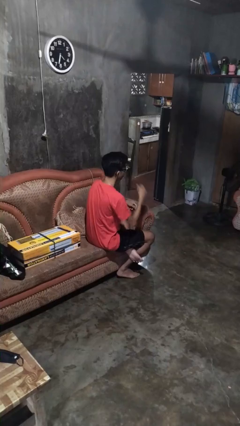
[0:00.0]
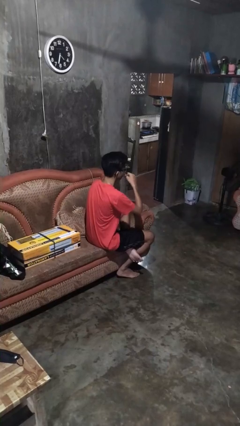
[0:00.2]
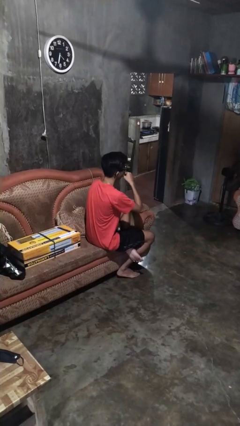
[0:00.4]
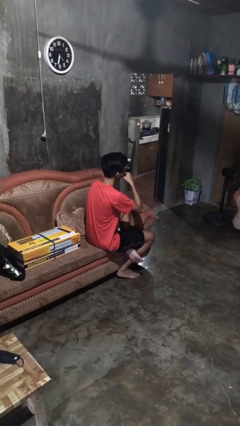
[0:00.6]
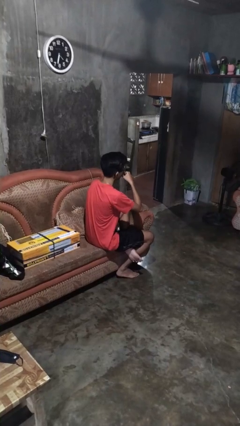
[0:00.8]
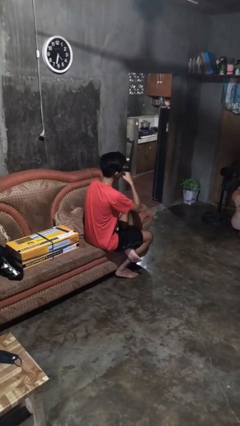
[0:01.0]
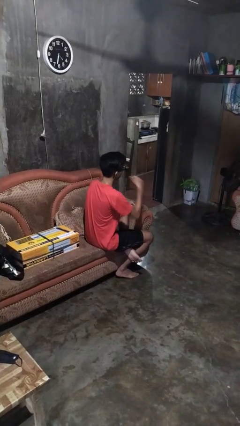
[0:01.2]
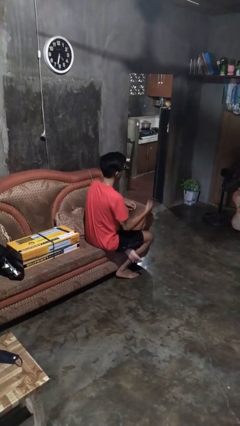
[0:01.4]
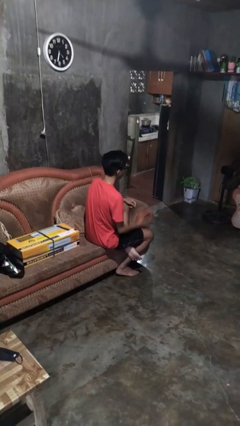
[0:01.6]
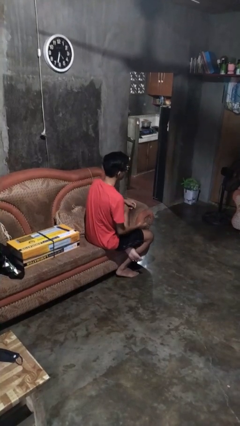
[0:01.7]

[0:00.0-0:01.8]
person licks fingers

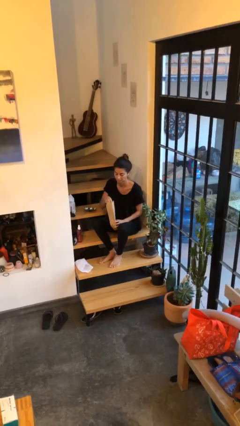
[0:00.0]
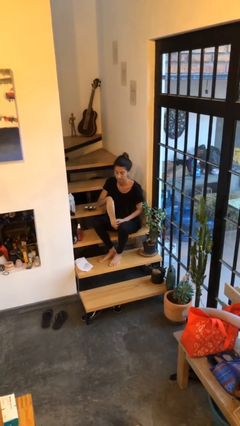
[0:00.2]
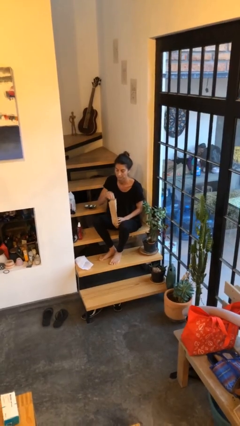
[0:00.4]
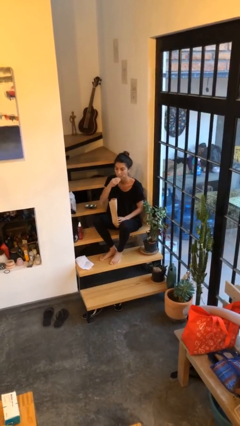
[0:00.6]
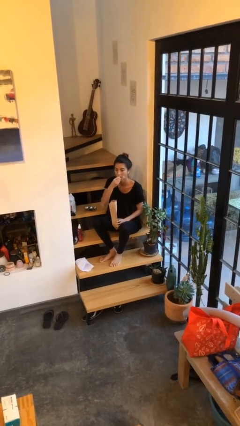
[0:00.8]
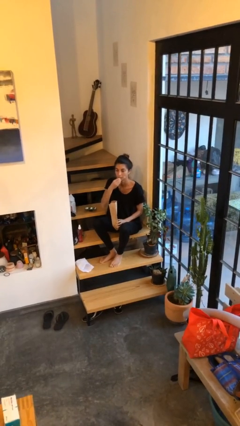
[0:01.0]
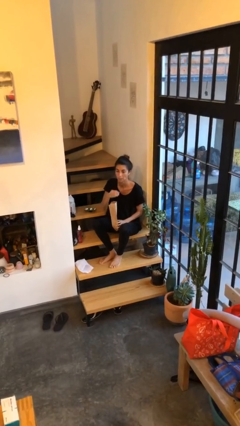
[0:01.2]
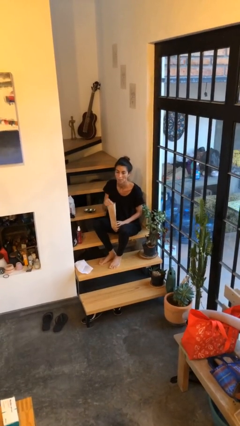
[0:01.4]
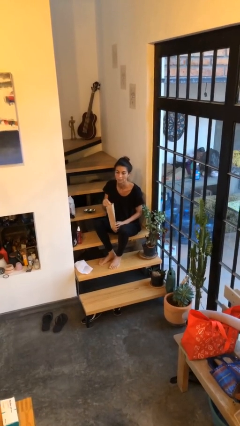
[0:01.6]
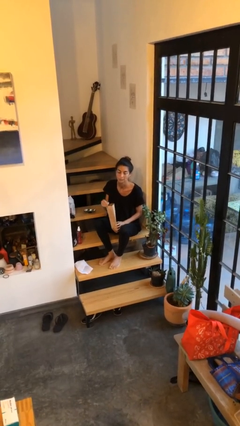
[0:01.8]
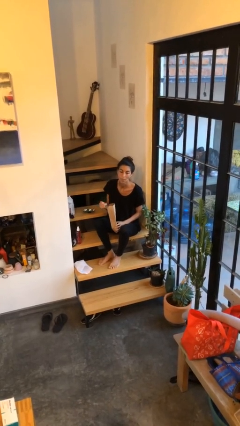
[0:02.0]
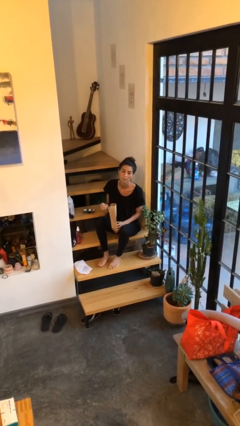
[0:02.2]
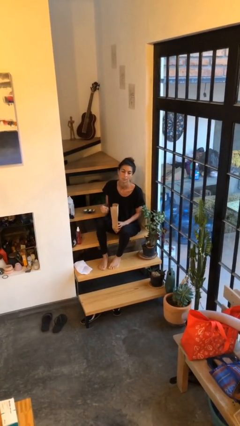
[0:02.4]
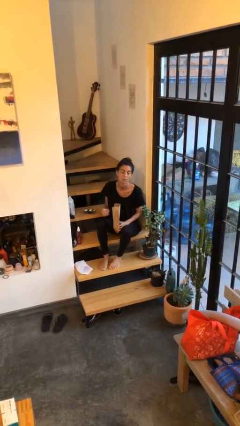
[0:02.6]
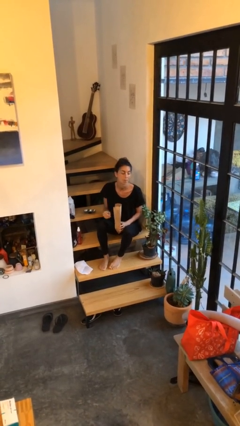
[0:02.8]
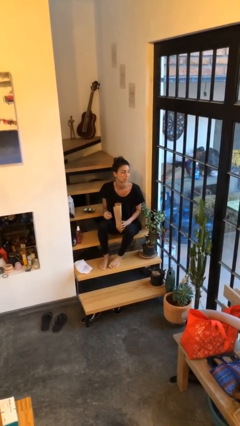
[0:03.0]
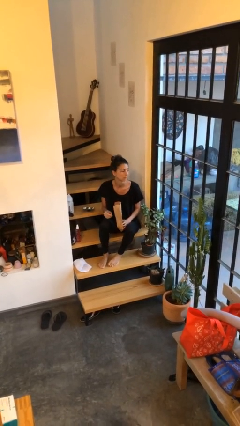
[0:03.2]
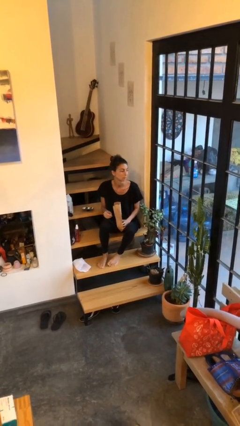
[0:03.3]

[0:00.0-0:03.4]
person eats snack from bag

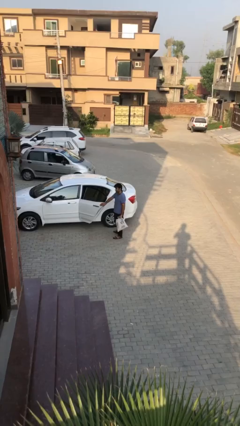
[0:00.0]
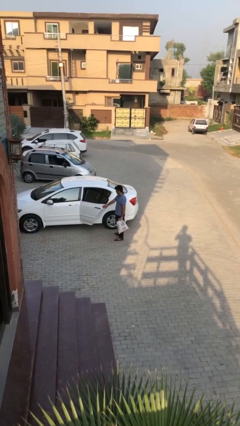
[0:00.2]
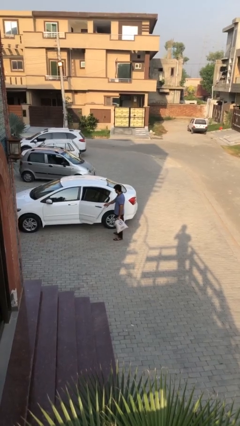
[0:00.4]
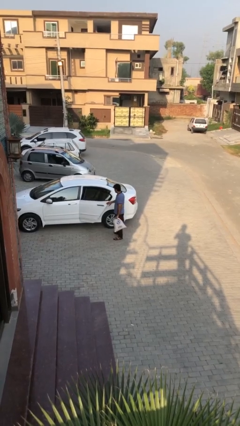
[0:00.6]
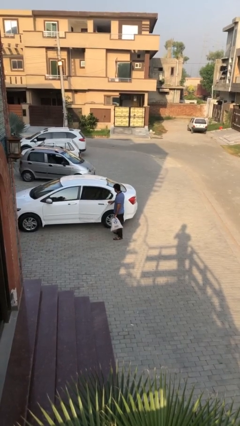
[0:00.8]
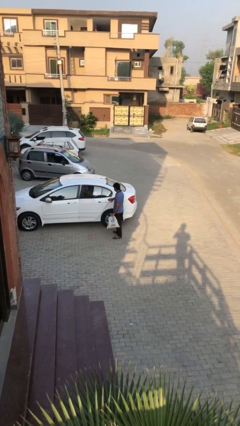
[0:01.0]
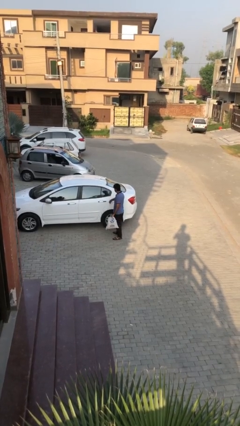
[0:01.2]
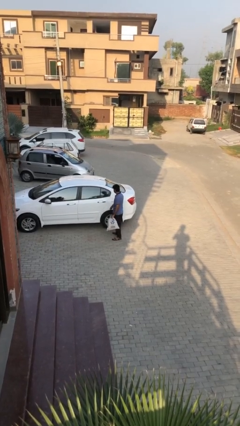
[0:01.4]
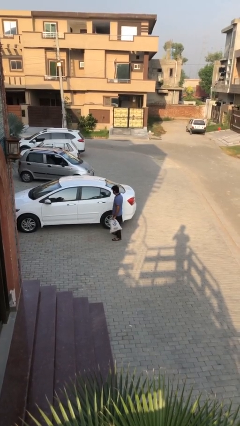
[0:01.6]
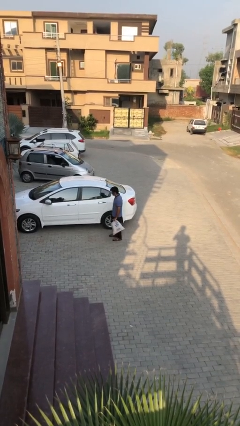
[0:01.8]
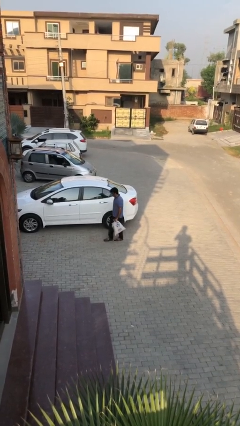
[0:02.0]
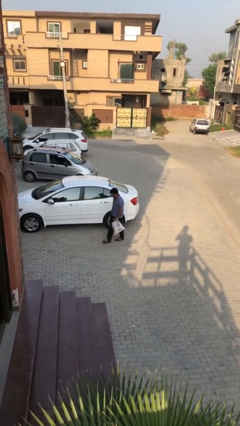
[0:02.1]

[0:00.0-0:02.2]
person closes car door

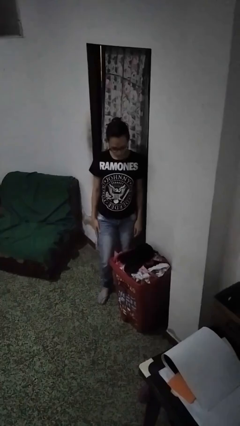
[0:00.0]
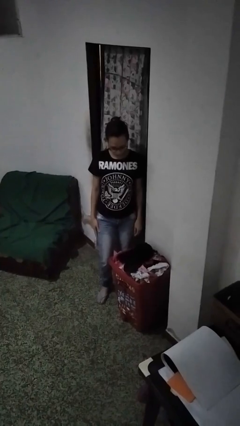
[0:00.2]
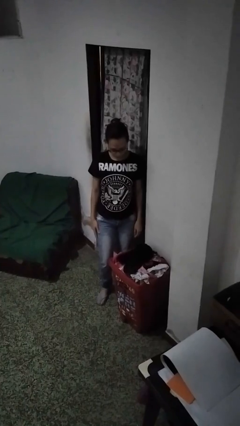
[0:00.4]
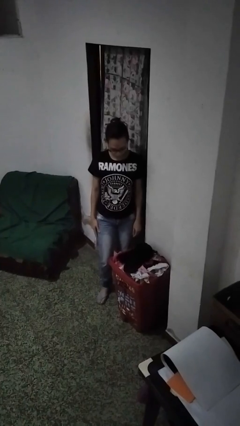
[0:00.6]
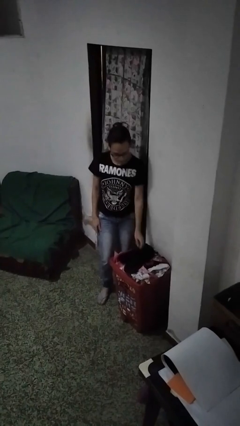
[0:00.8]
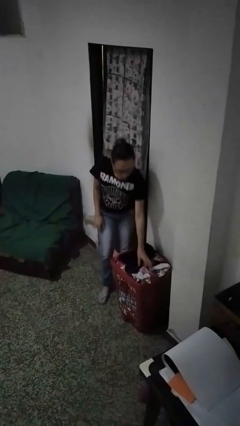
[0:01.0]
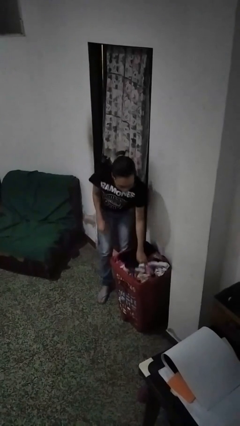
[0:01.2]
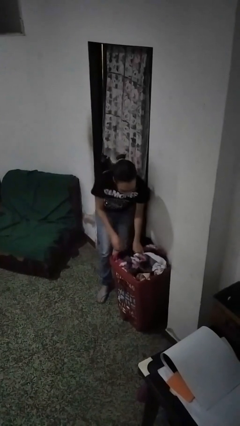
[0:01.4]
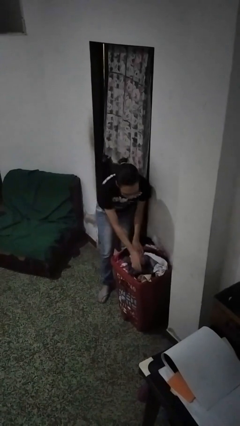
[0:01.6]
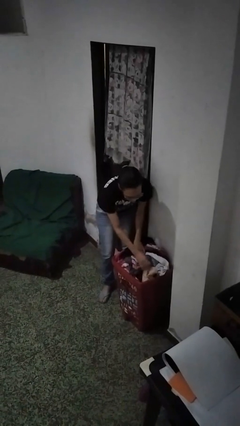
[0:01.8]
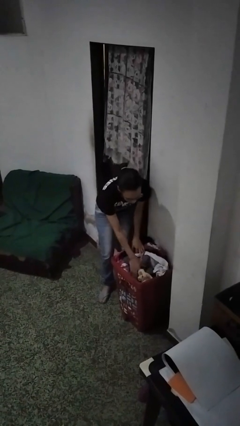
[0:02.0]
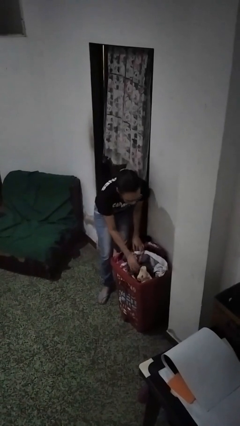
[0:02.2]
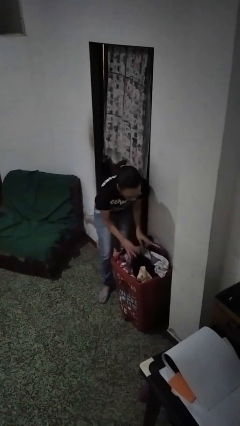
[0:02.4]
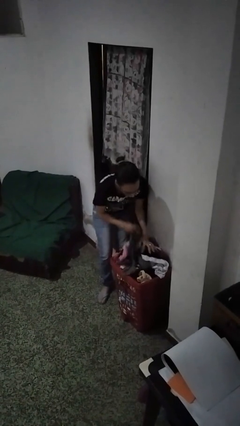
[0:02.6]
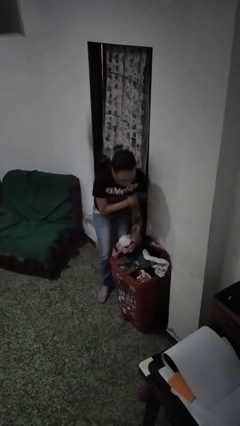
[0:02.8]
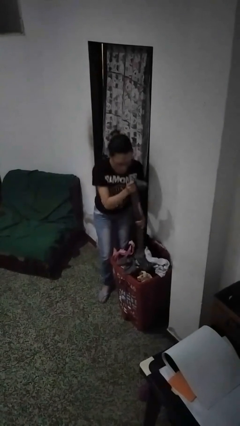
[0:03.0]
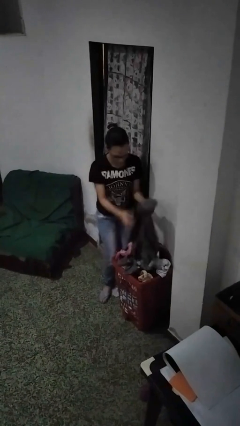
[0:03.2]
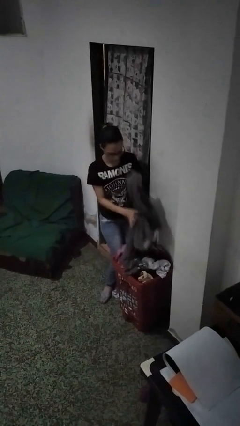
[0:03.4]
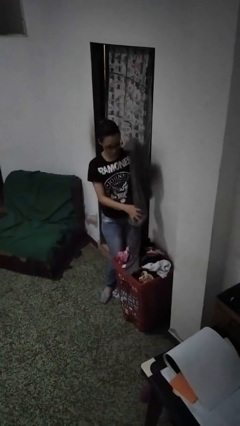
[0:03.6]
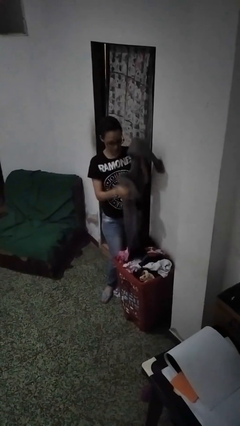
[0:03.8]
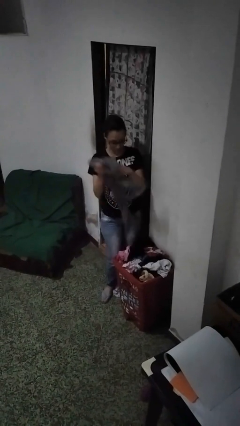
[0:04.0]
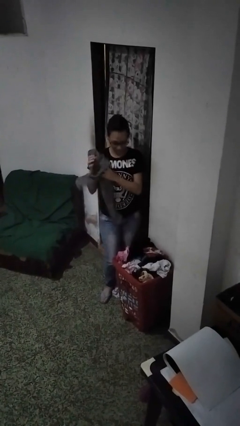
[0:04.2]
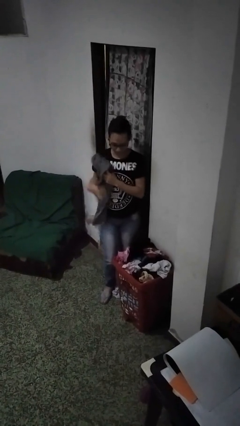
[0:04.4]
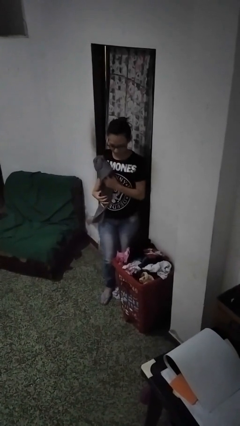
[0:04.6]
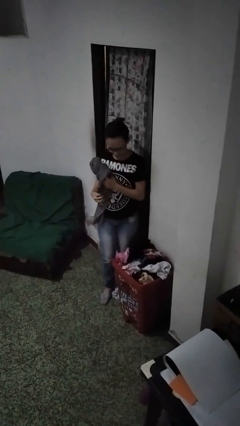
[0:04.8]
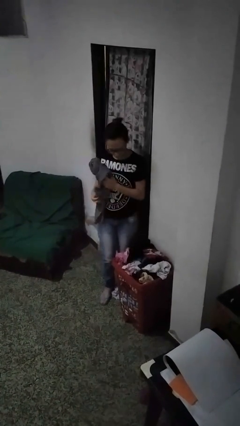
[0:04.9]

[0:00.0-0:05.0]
person takes object from basket

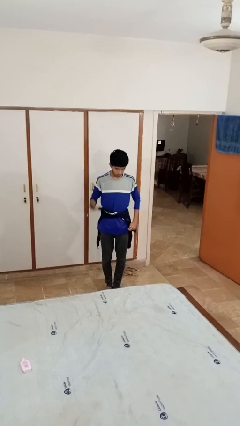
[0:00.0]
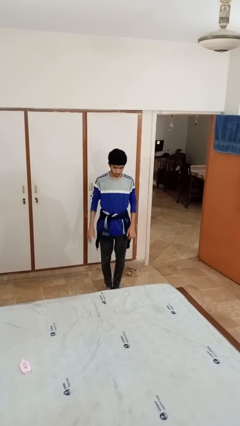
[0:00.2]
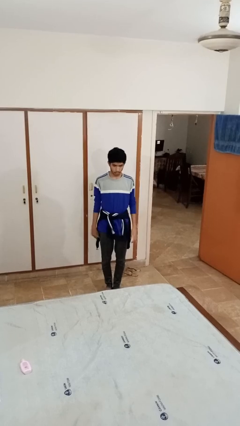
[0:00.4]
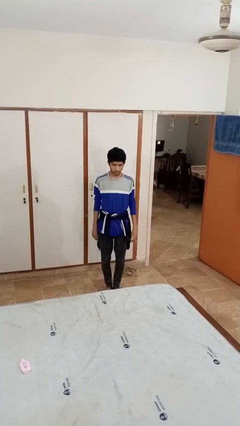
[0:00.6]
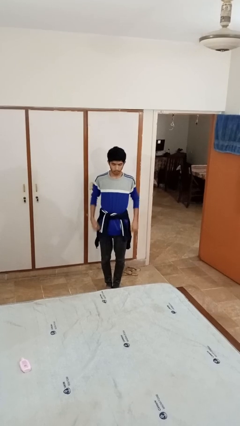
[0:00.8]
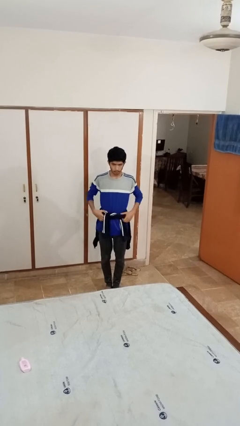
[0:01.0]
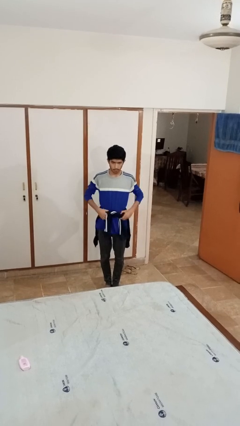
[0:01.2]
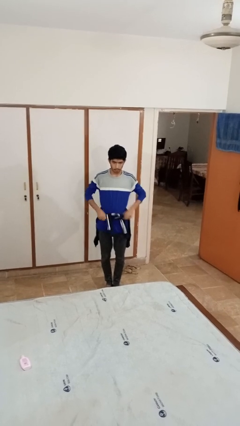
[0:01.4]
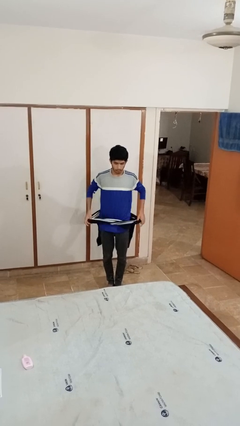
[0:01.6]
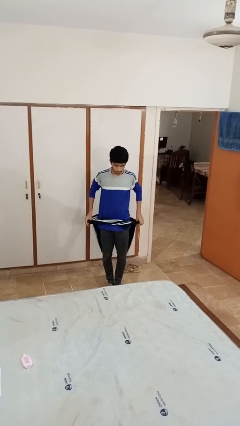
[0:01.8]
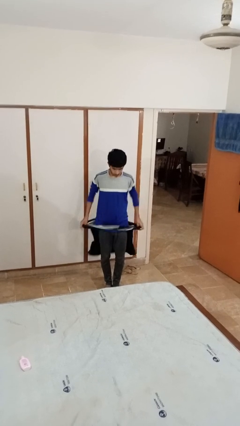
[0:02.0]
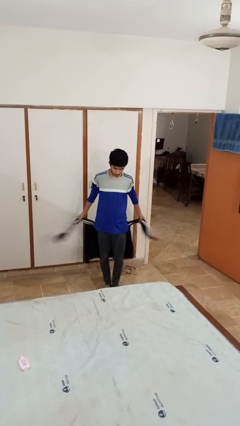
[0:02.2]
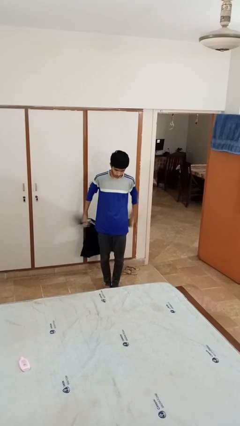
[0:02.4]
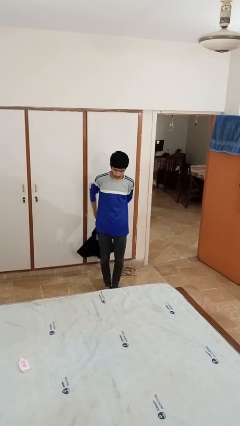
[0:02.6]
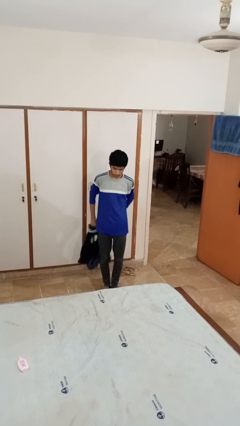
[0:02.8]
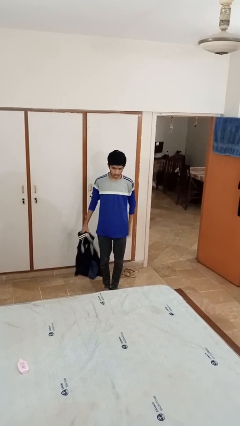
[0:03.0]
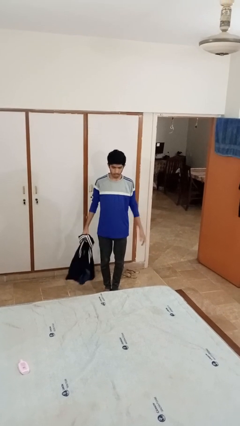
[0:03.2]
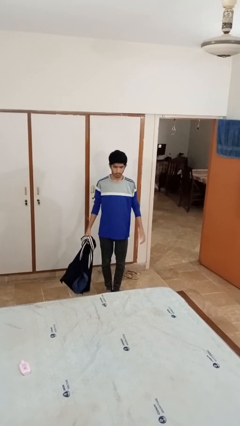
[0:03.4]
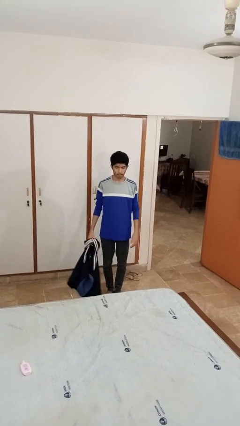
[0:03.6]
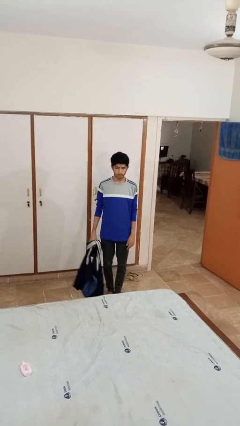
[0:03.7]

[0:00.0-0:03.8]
person unties jacket around waist

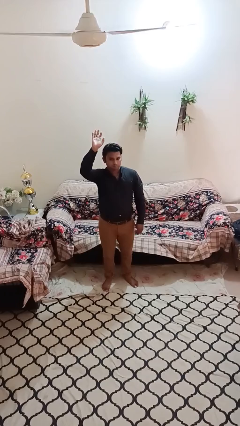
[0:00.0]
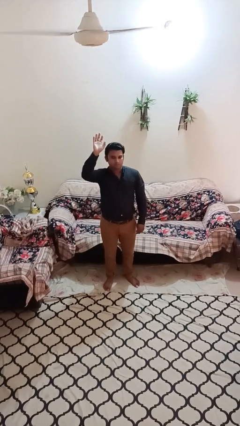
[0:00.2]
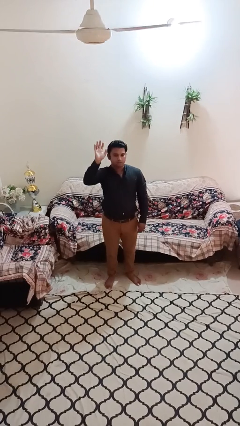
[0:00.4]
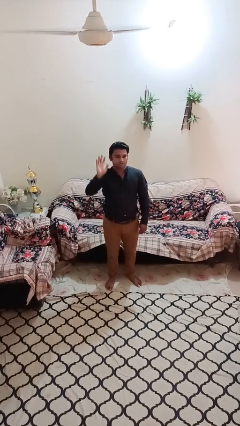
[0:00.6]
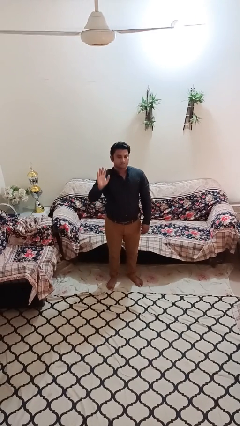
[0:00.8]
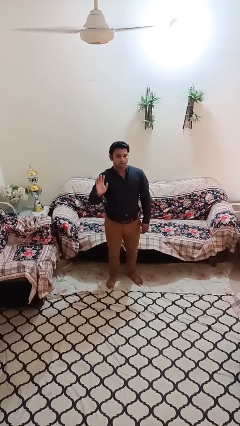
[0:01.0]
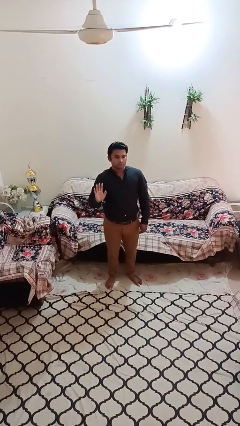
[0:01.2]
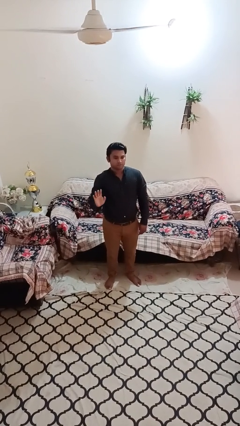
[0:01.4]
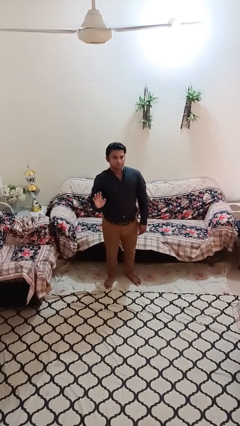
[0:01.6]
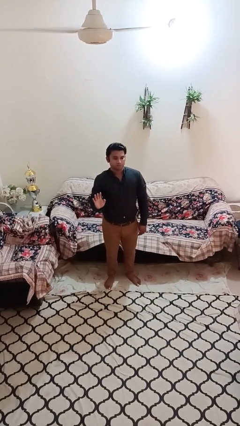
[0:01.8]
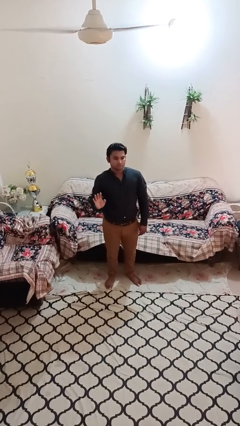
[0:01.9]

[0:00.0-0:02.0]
person gestures lower hand
